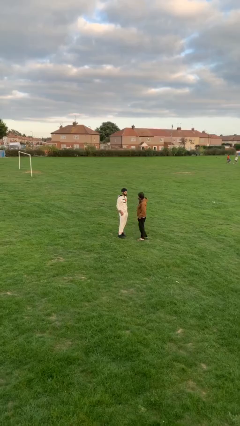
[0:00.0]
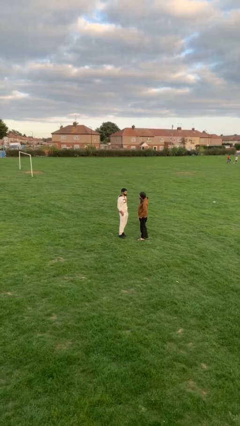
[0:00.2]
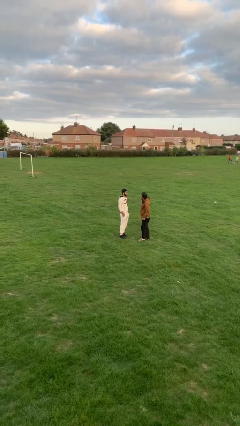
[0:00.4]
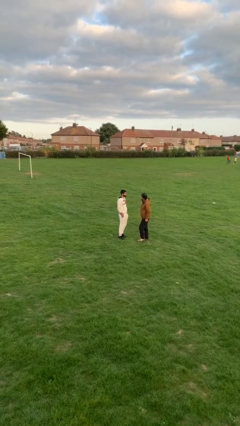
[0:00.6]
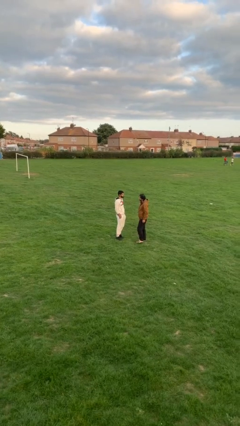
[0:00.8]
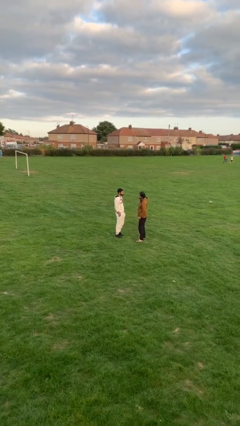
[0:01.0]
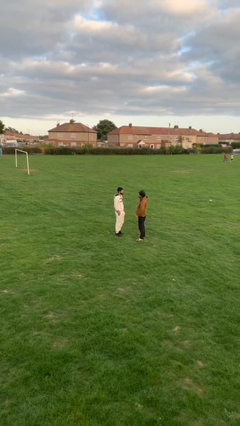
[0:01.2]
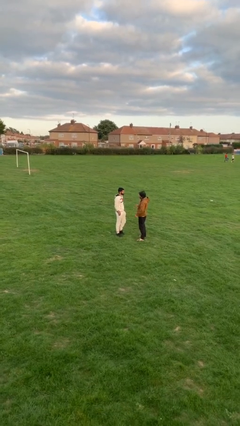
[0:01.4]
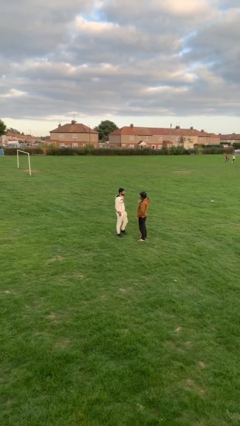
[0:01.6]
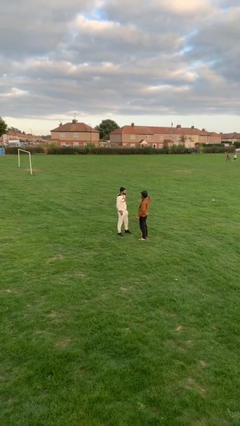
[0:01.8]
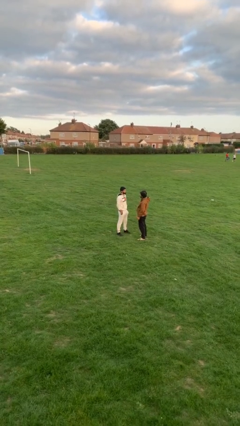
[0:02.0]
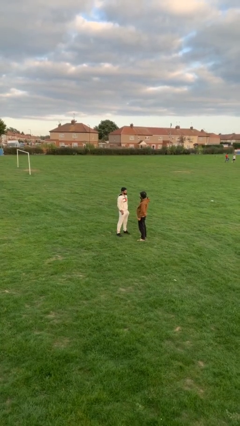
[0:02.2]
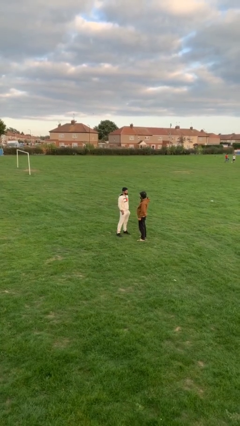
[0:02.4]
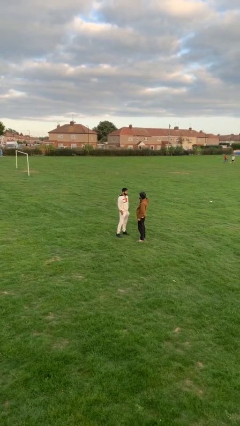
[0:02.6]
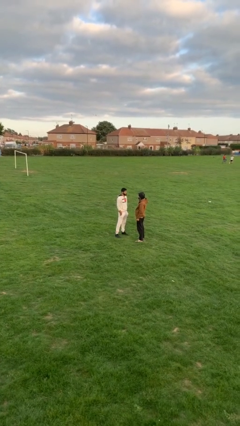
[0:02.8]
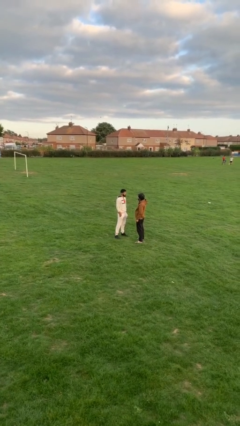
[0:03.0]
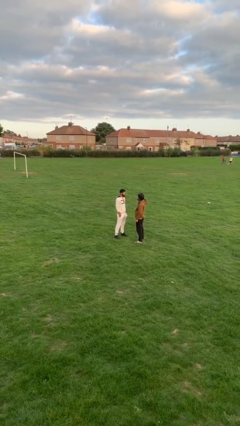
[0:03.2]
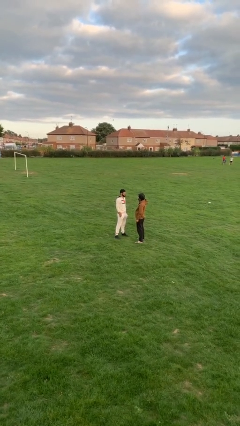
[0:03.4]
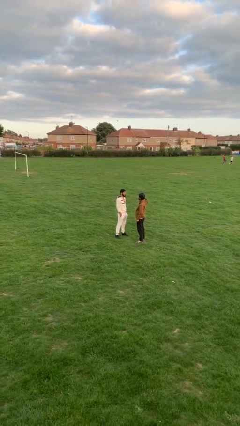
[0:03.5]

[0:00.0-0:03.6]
person talks to person

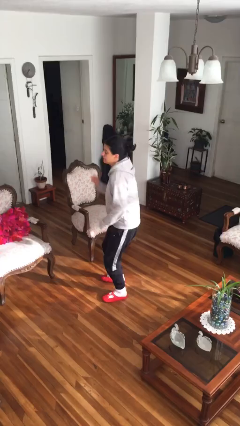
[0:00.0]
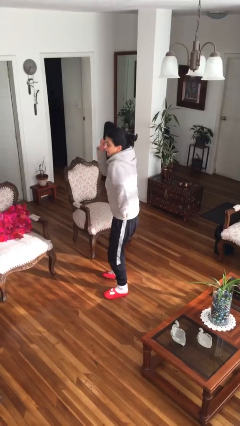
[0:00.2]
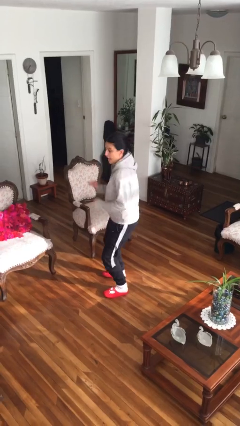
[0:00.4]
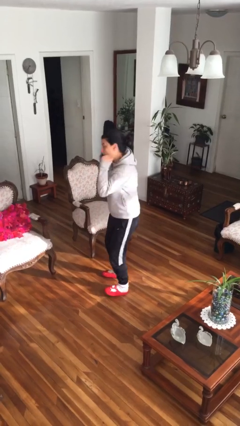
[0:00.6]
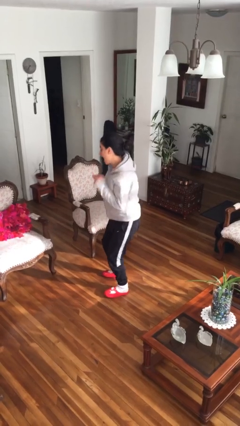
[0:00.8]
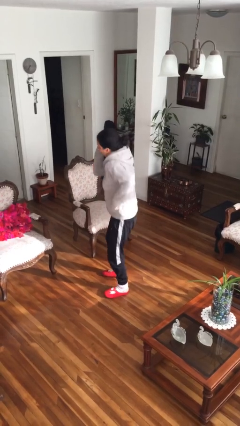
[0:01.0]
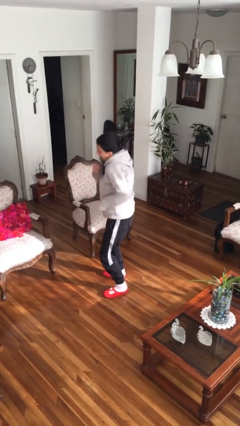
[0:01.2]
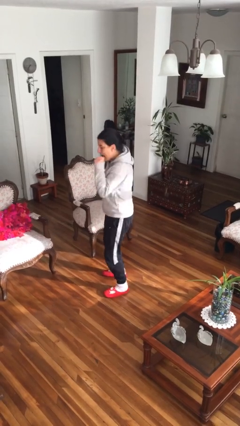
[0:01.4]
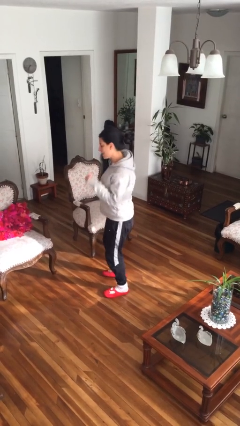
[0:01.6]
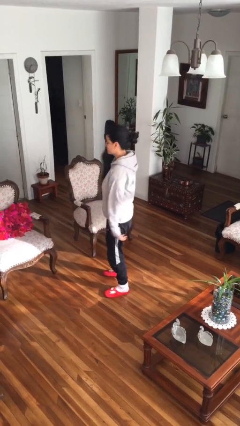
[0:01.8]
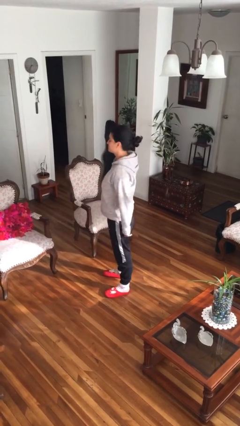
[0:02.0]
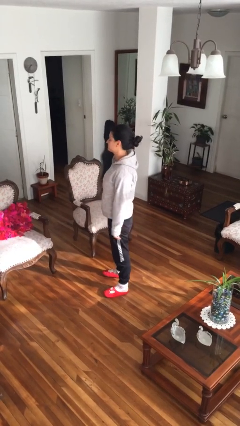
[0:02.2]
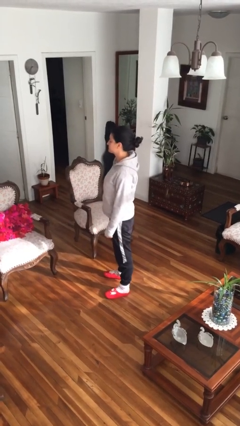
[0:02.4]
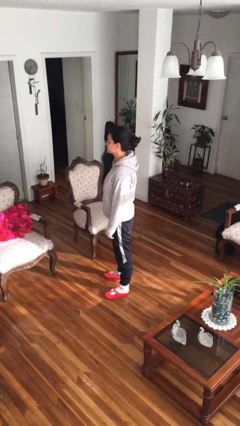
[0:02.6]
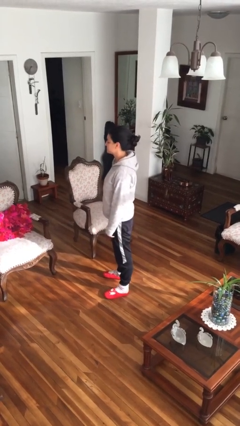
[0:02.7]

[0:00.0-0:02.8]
person dances in place

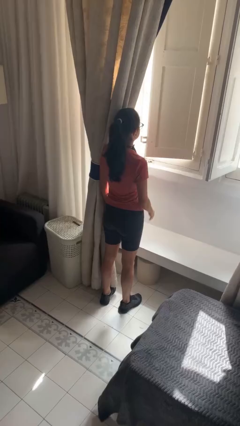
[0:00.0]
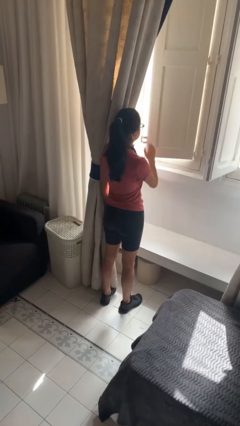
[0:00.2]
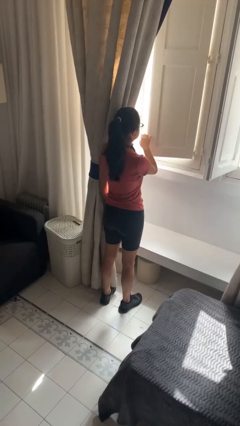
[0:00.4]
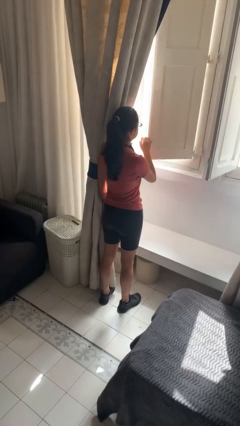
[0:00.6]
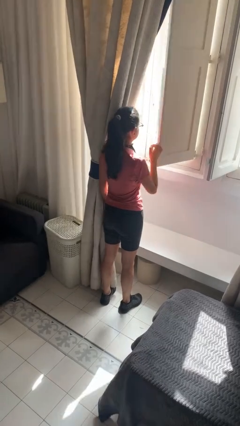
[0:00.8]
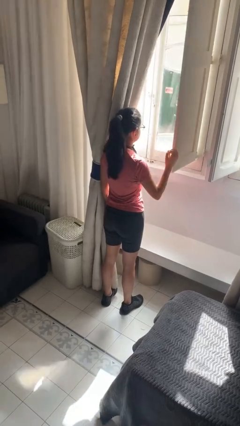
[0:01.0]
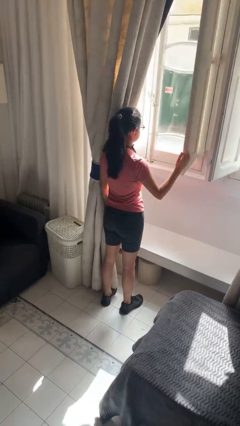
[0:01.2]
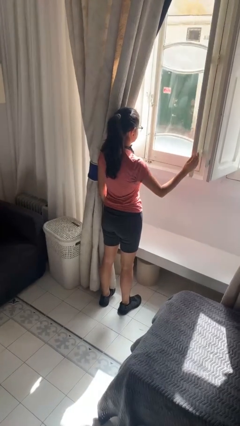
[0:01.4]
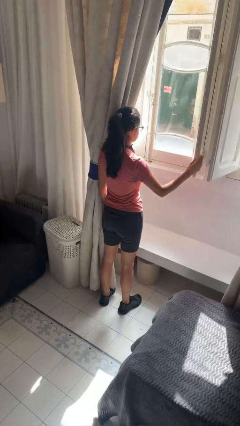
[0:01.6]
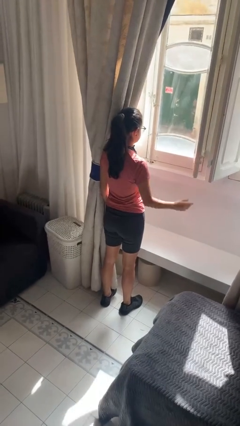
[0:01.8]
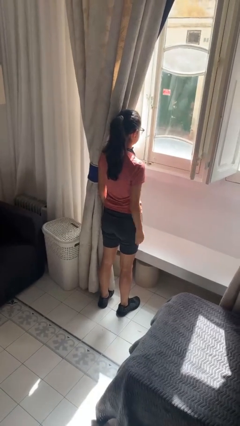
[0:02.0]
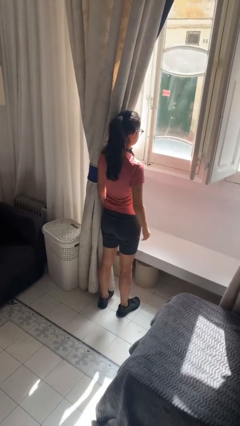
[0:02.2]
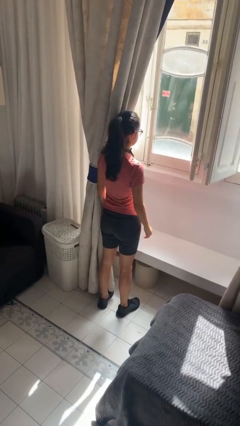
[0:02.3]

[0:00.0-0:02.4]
person opens home window

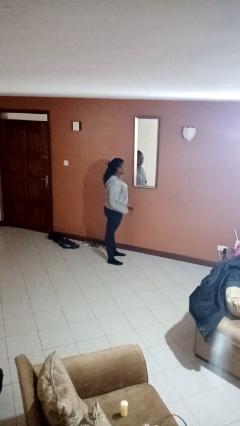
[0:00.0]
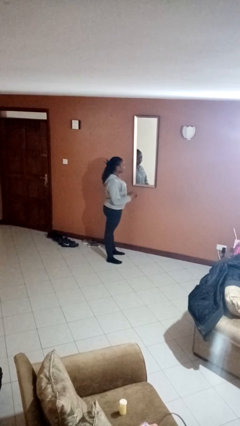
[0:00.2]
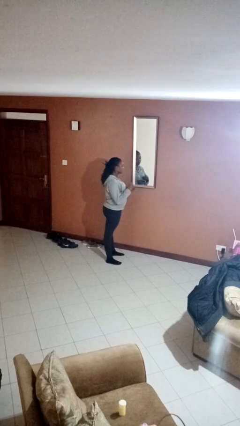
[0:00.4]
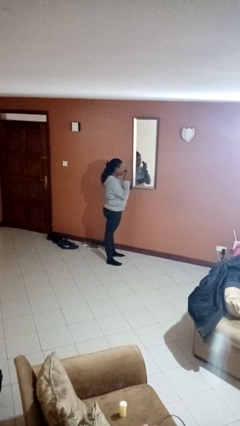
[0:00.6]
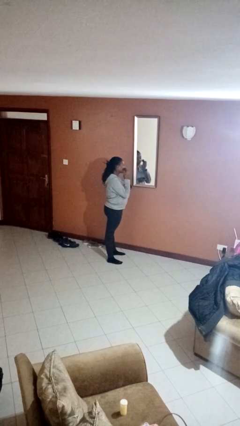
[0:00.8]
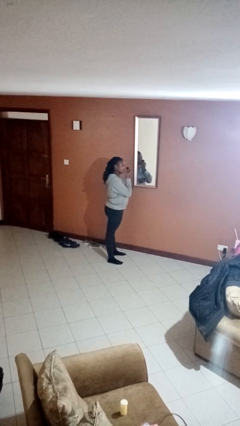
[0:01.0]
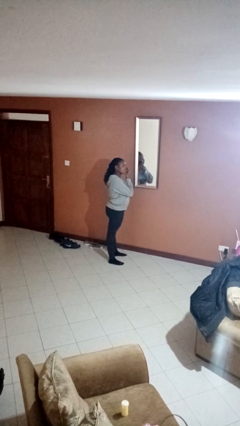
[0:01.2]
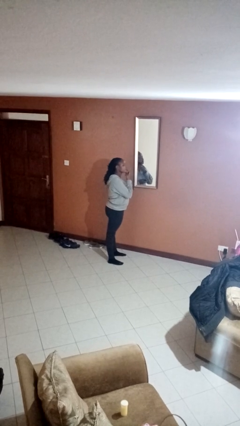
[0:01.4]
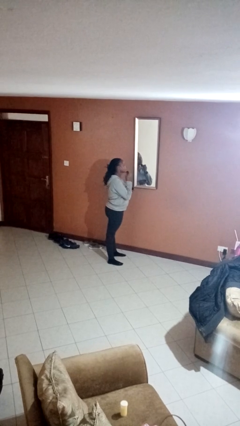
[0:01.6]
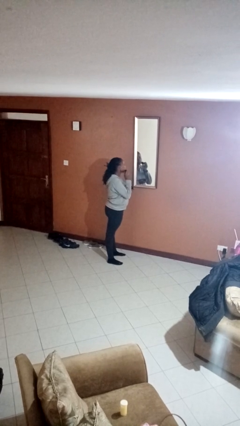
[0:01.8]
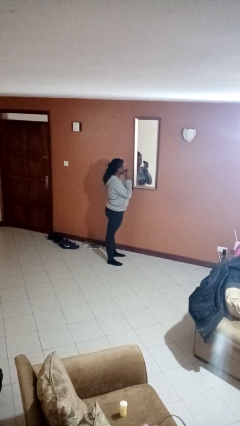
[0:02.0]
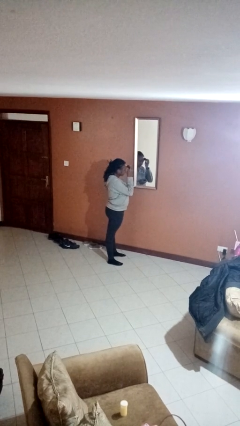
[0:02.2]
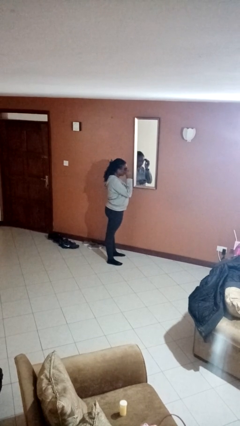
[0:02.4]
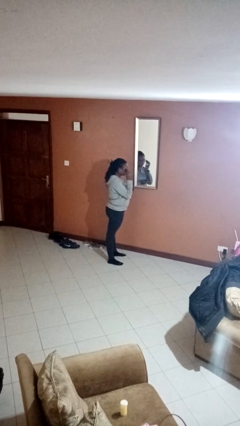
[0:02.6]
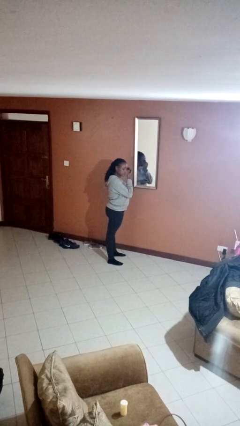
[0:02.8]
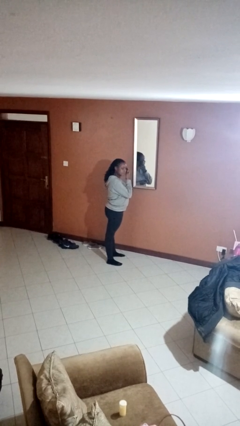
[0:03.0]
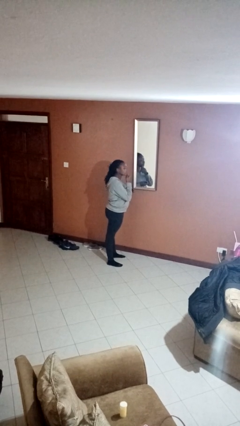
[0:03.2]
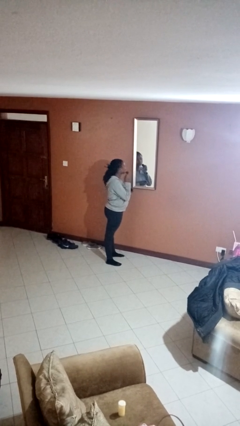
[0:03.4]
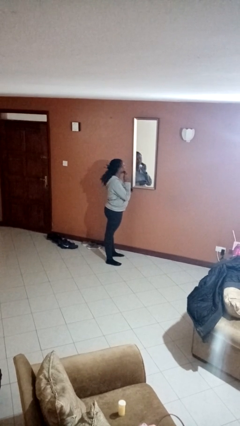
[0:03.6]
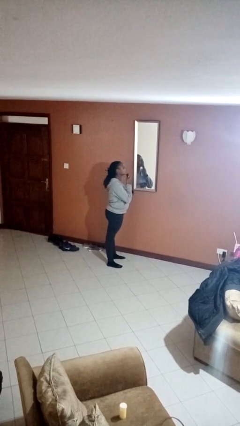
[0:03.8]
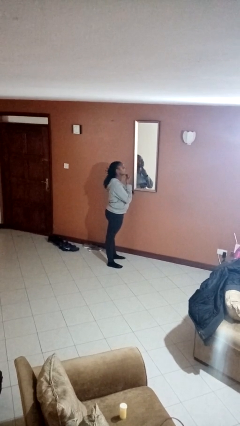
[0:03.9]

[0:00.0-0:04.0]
person applies foundation makeup

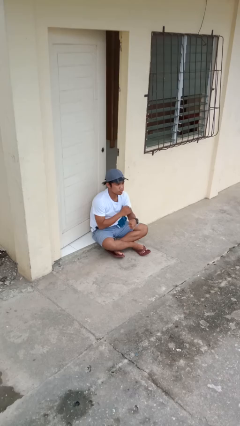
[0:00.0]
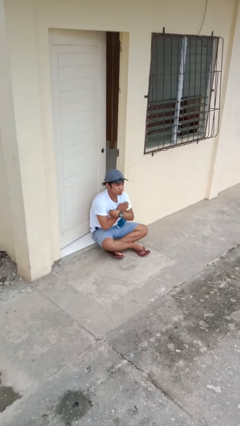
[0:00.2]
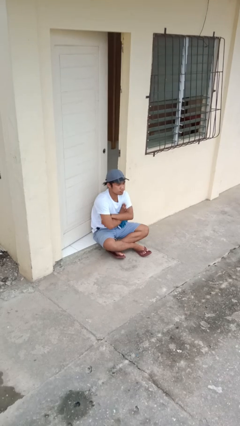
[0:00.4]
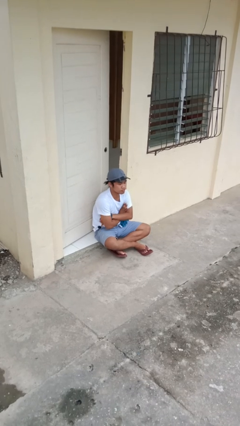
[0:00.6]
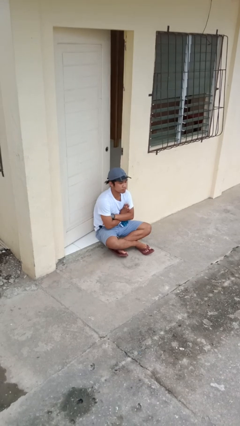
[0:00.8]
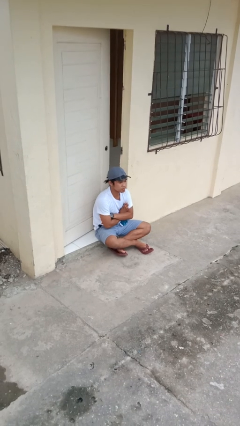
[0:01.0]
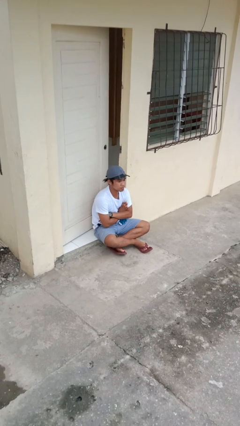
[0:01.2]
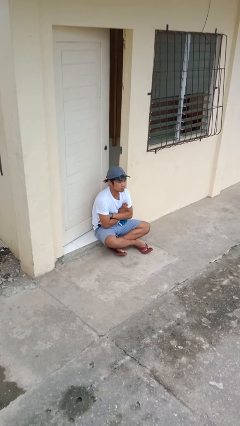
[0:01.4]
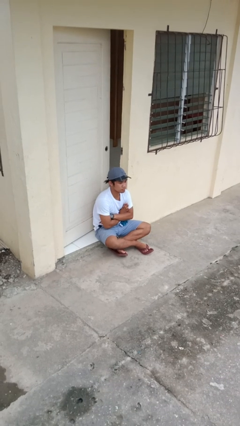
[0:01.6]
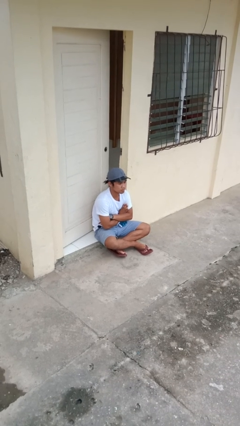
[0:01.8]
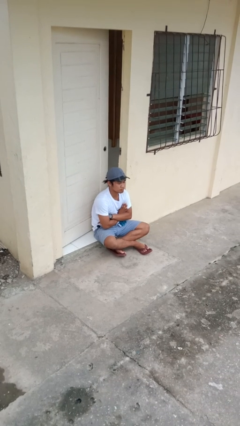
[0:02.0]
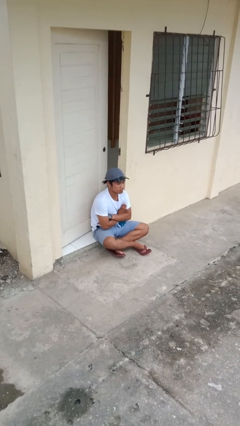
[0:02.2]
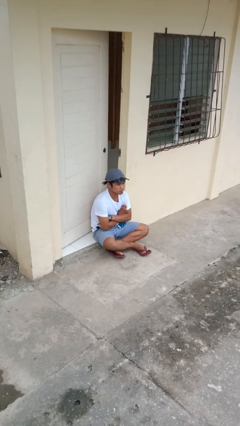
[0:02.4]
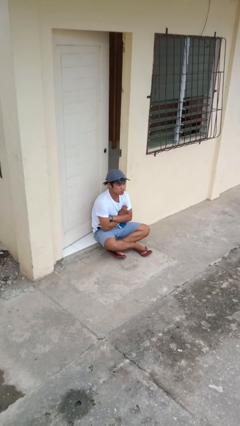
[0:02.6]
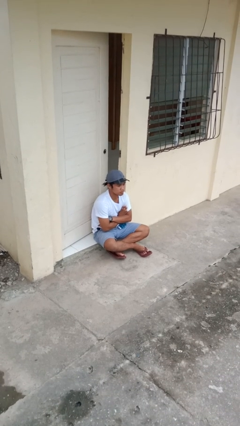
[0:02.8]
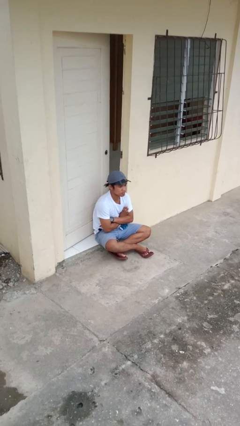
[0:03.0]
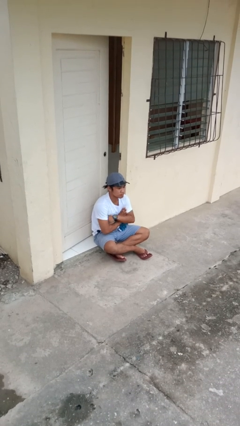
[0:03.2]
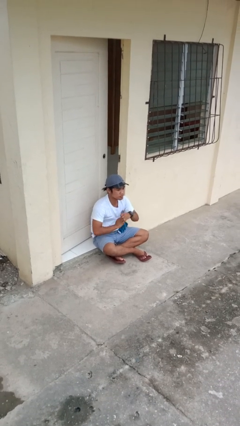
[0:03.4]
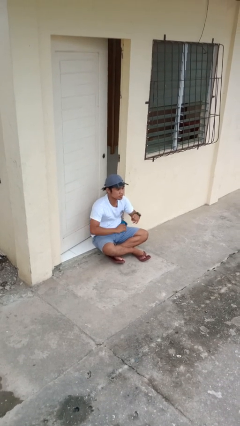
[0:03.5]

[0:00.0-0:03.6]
person crosses arms

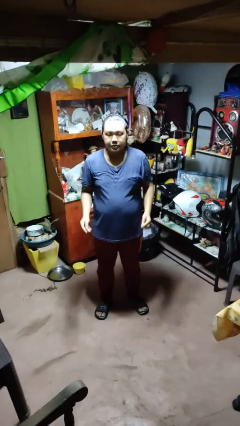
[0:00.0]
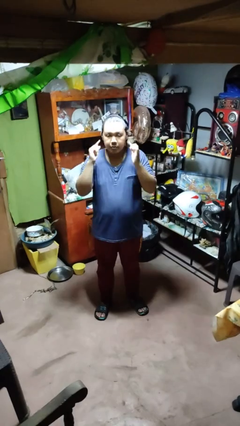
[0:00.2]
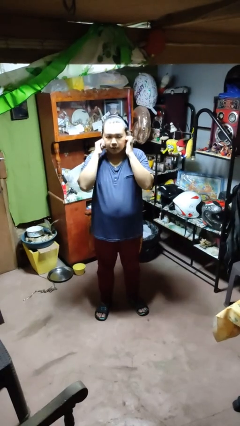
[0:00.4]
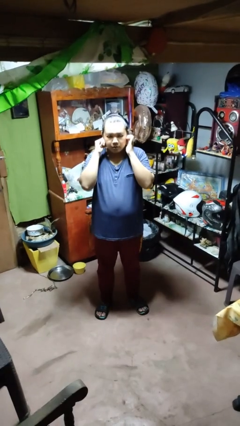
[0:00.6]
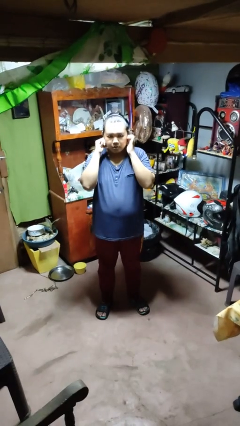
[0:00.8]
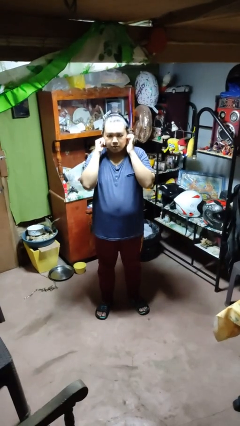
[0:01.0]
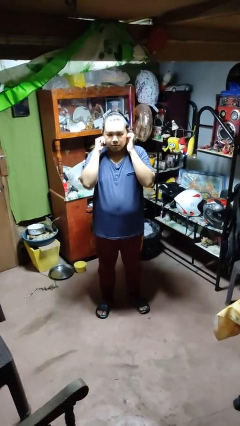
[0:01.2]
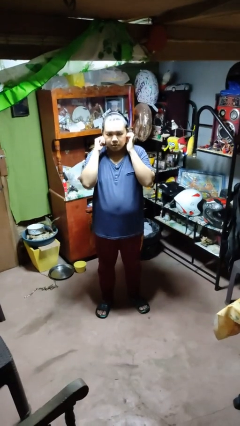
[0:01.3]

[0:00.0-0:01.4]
person puts fingers in ear

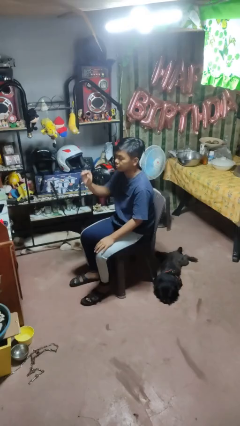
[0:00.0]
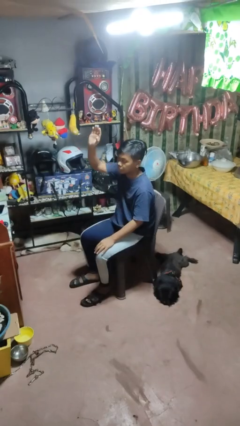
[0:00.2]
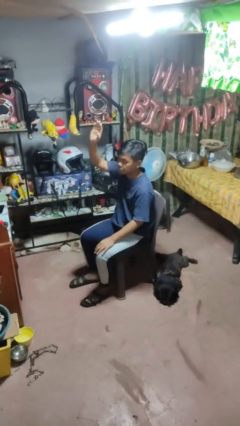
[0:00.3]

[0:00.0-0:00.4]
person gestures raise hand
